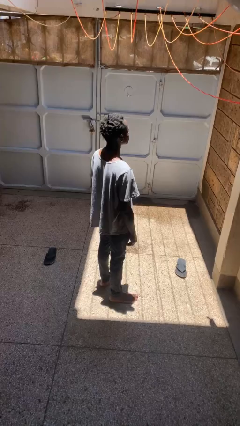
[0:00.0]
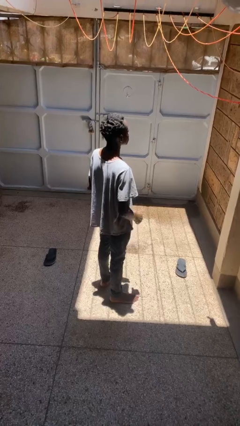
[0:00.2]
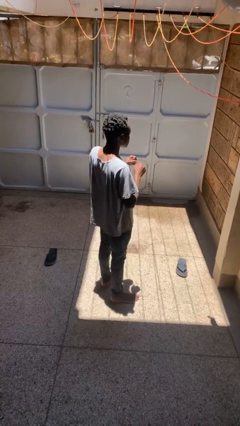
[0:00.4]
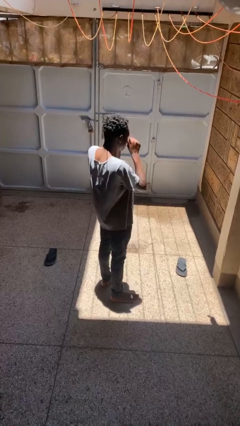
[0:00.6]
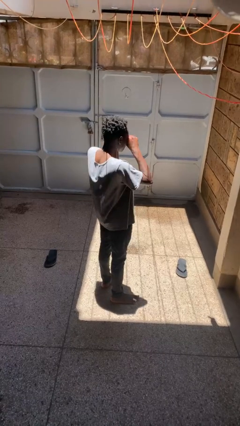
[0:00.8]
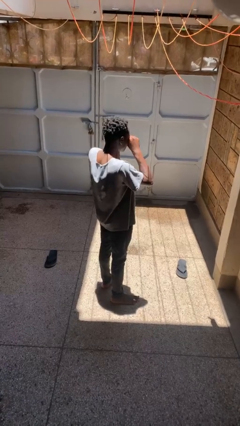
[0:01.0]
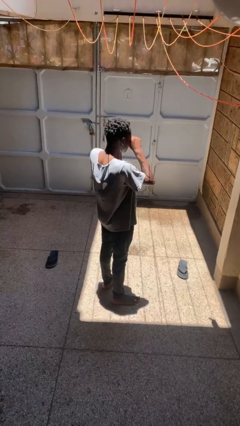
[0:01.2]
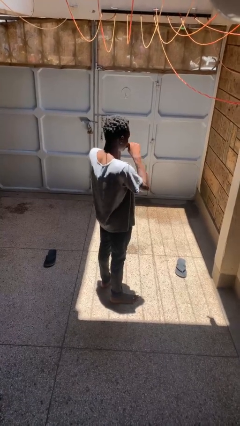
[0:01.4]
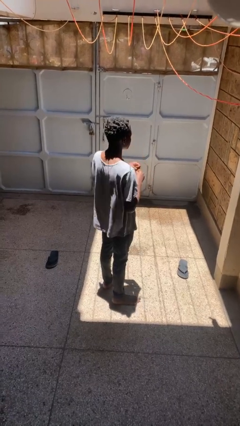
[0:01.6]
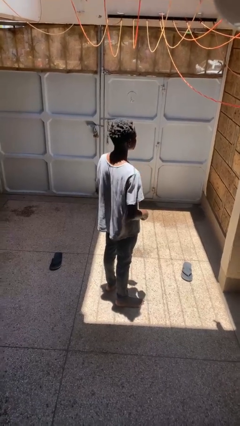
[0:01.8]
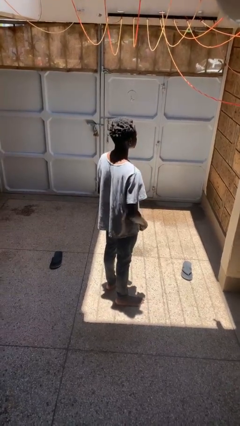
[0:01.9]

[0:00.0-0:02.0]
person rubs eyes

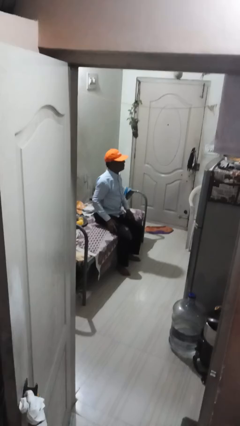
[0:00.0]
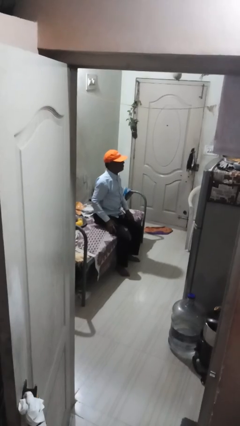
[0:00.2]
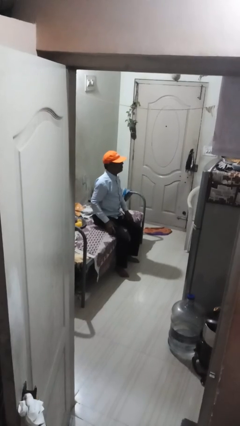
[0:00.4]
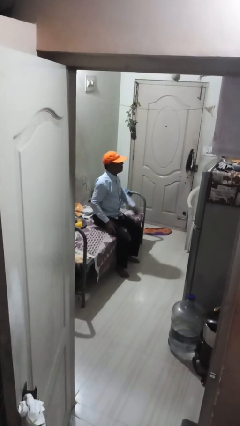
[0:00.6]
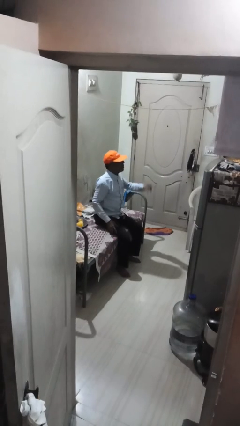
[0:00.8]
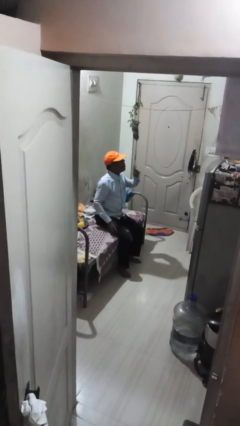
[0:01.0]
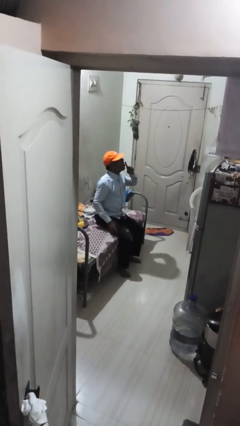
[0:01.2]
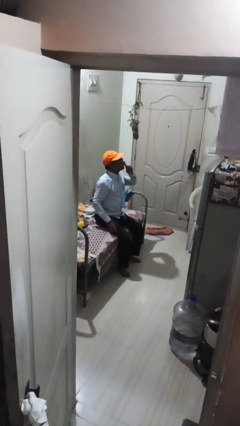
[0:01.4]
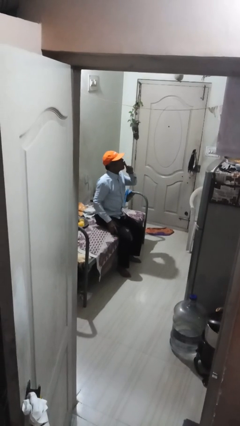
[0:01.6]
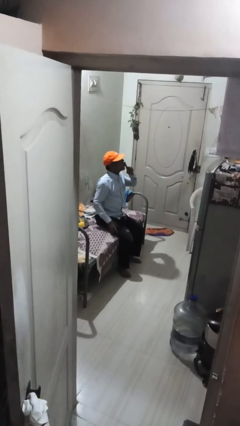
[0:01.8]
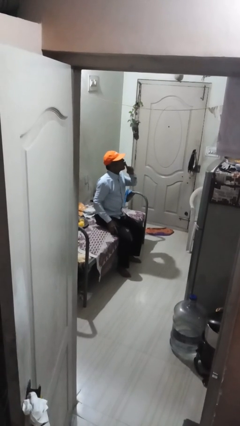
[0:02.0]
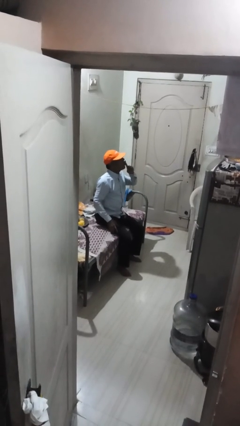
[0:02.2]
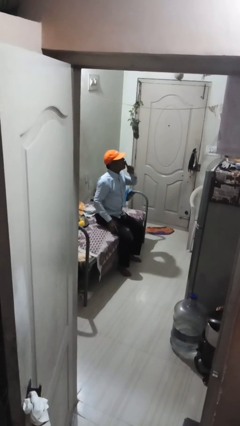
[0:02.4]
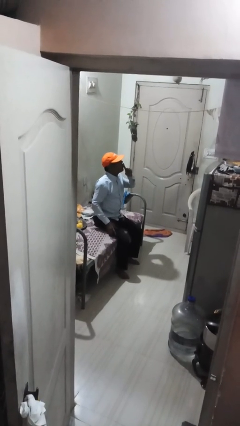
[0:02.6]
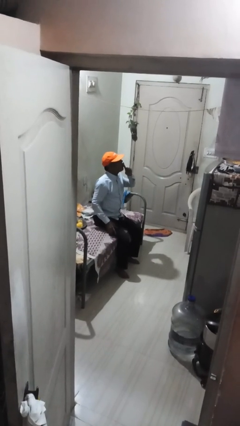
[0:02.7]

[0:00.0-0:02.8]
person gestures be quiet

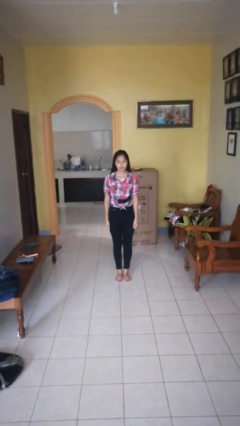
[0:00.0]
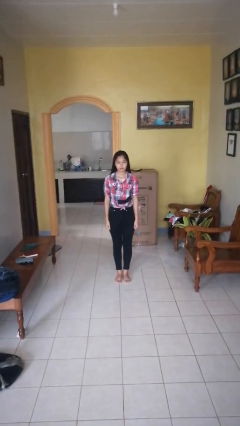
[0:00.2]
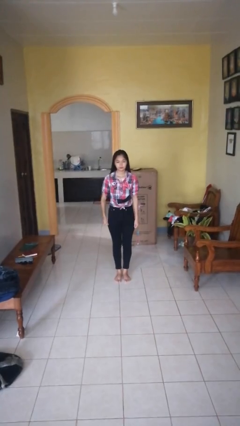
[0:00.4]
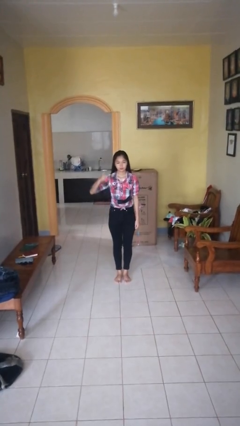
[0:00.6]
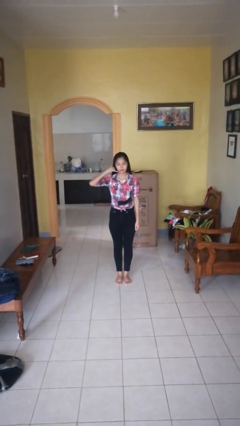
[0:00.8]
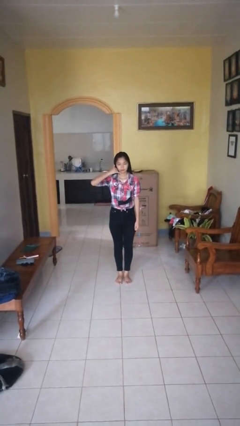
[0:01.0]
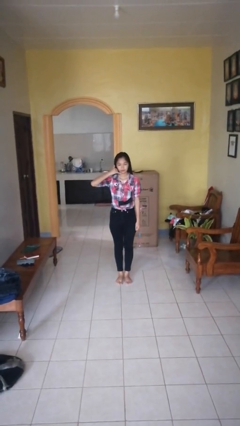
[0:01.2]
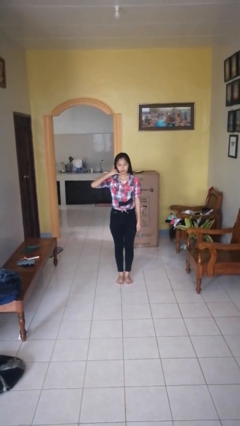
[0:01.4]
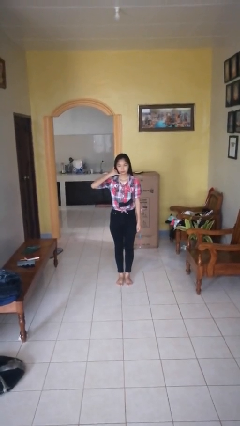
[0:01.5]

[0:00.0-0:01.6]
person gestures call me

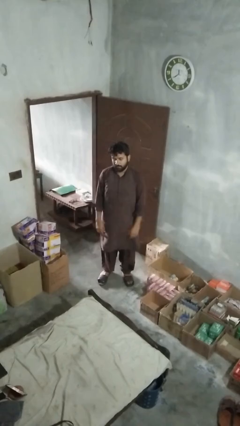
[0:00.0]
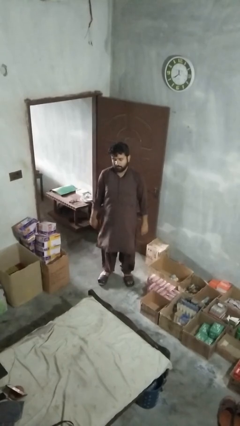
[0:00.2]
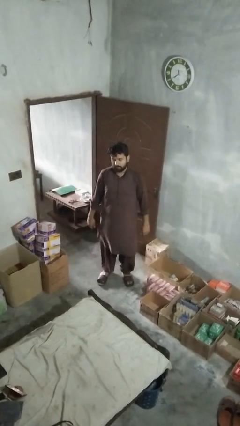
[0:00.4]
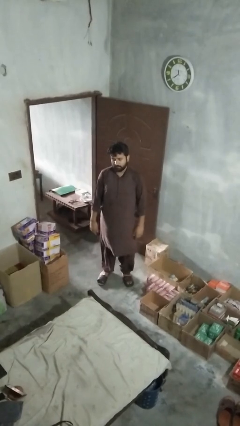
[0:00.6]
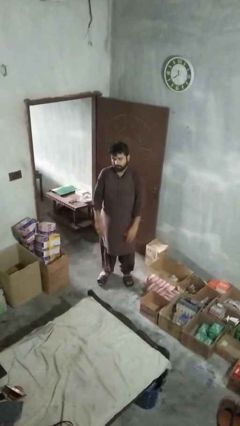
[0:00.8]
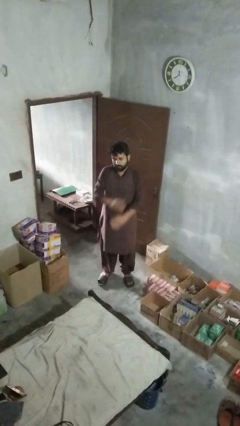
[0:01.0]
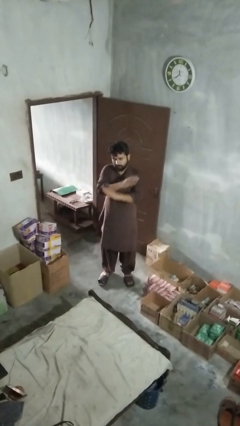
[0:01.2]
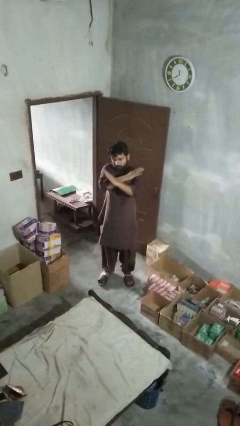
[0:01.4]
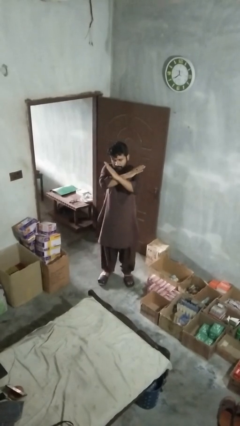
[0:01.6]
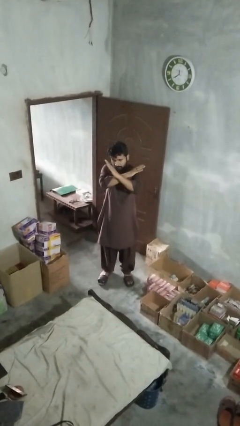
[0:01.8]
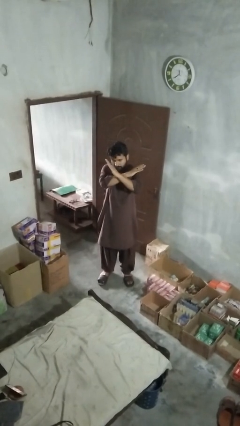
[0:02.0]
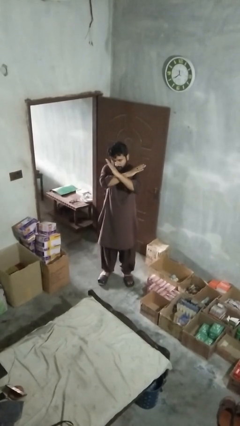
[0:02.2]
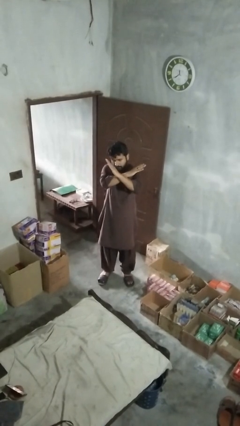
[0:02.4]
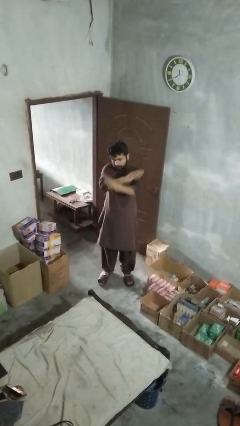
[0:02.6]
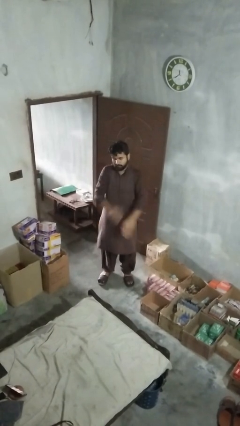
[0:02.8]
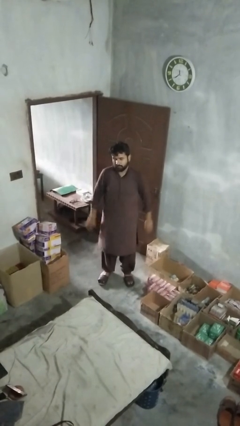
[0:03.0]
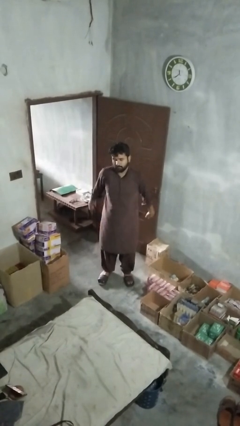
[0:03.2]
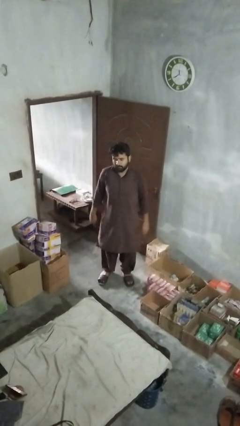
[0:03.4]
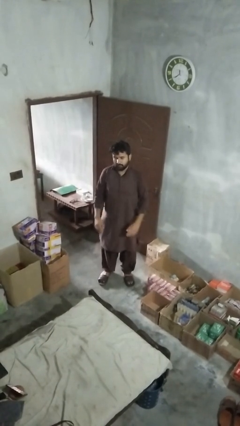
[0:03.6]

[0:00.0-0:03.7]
person gestures arms x

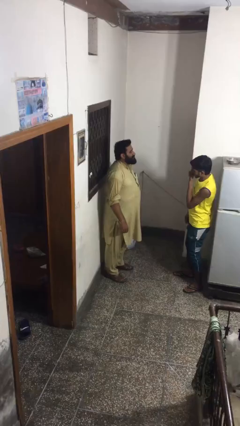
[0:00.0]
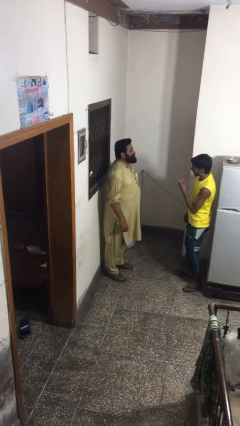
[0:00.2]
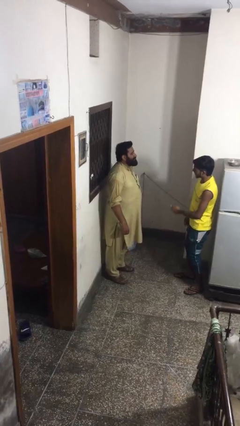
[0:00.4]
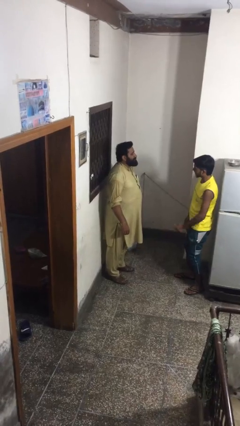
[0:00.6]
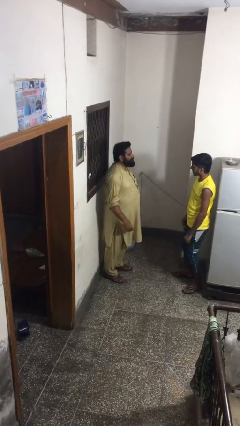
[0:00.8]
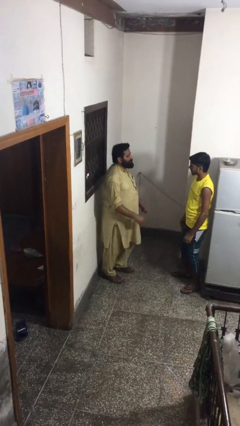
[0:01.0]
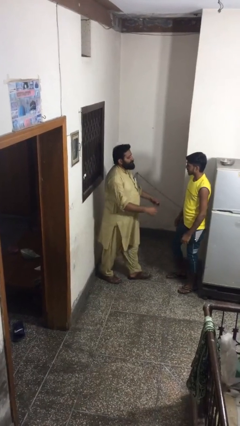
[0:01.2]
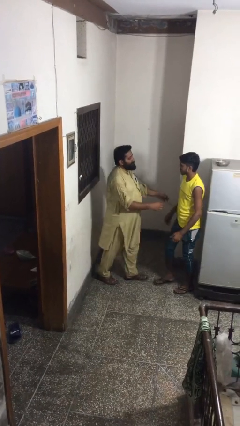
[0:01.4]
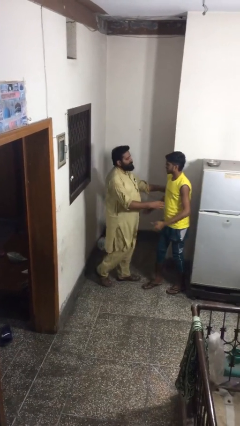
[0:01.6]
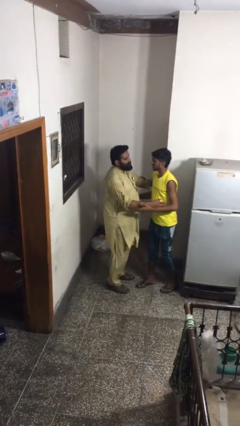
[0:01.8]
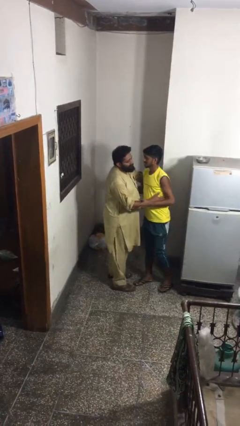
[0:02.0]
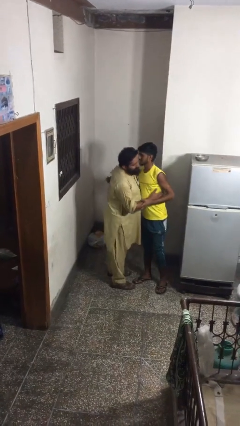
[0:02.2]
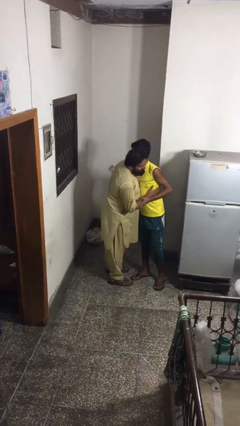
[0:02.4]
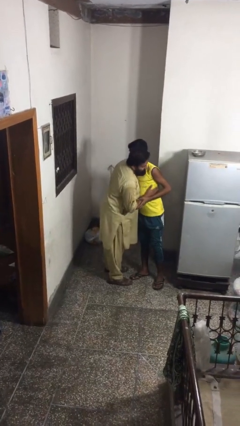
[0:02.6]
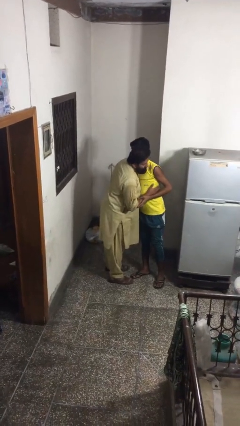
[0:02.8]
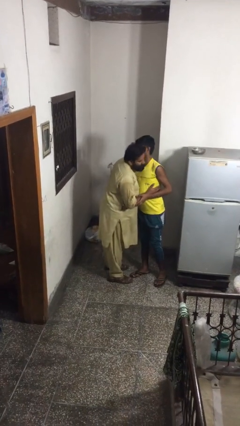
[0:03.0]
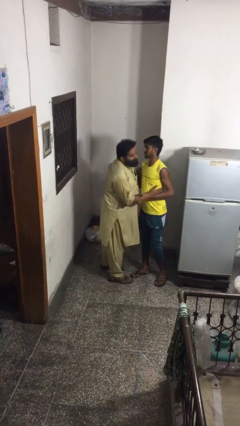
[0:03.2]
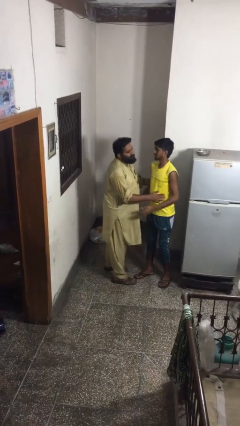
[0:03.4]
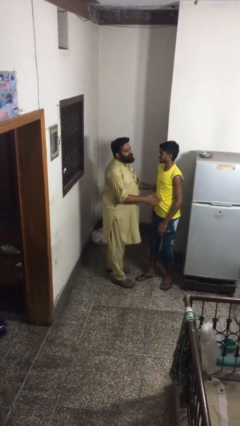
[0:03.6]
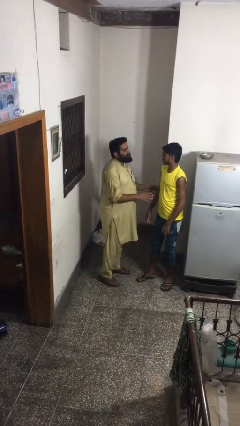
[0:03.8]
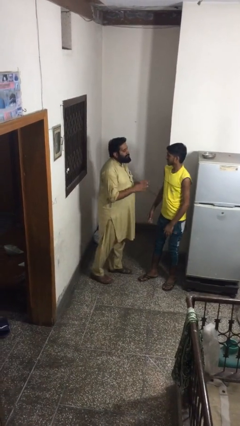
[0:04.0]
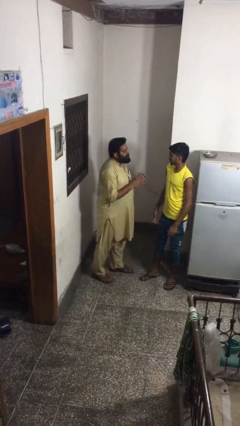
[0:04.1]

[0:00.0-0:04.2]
person embraces person

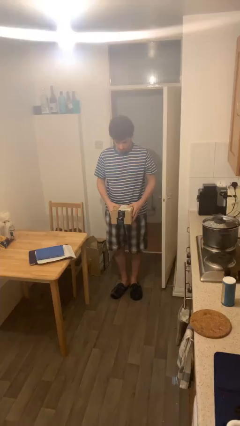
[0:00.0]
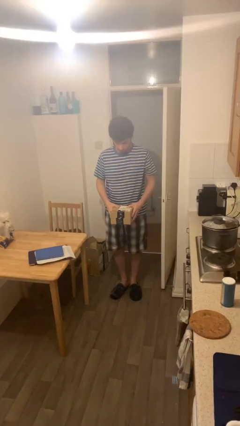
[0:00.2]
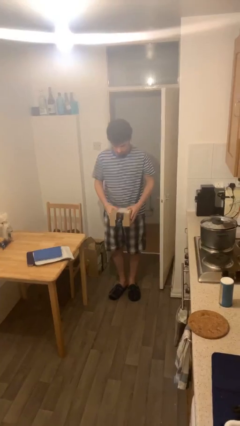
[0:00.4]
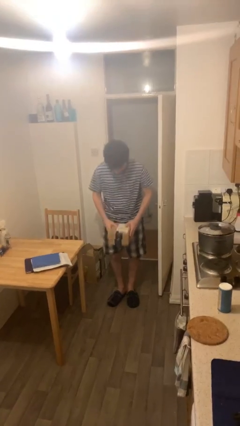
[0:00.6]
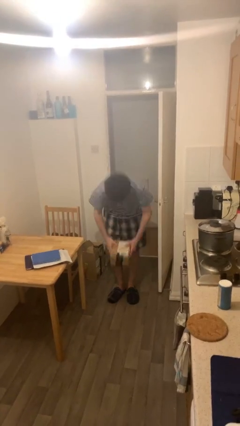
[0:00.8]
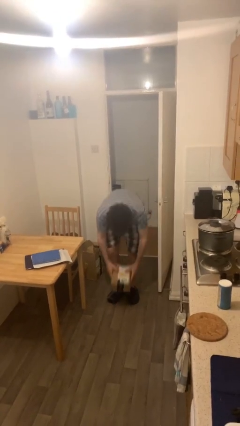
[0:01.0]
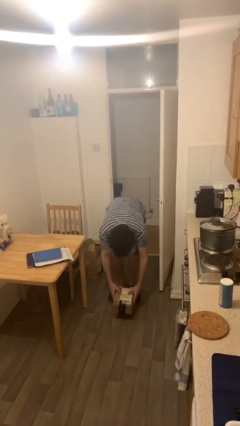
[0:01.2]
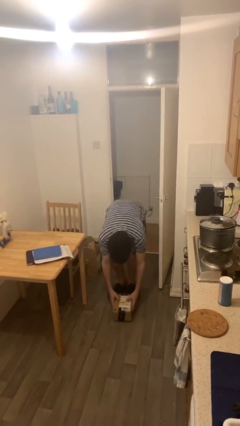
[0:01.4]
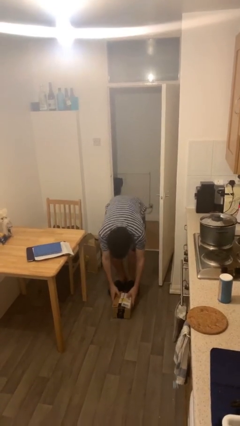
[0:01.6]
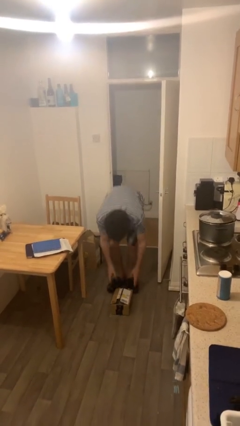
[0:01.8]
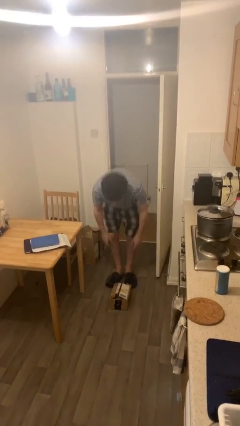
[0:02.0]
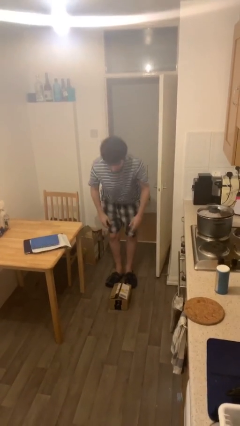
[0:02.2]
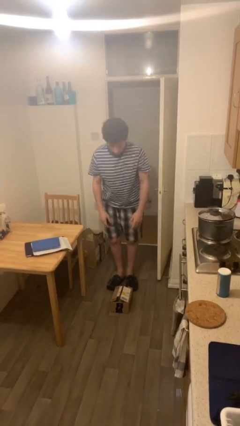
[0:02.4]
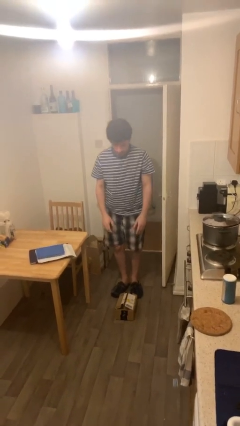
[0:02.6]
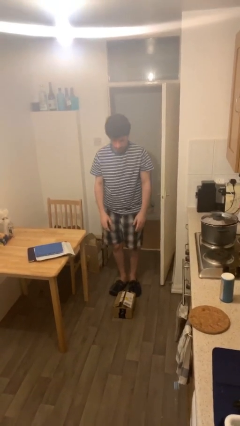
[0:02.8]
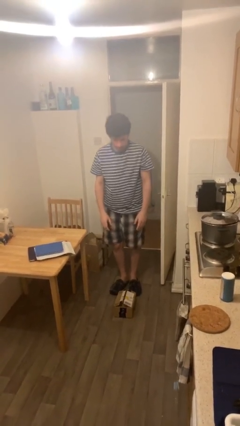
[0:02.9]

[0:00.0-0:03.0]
person puts down object on floor

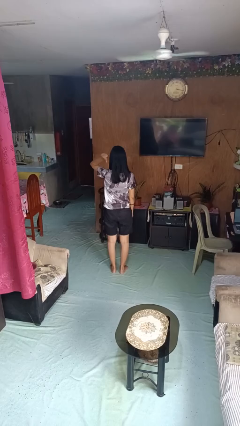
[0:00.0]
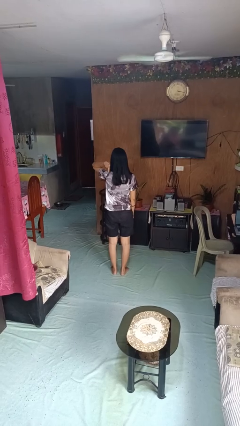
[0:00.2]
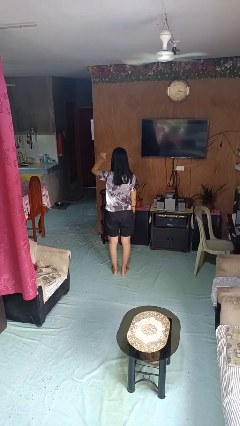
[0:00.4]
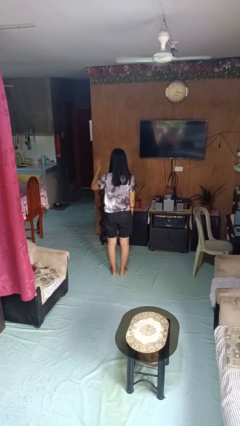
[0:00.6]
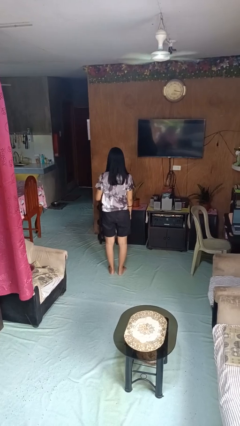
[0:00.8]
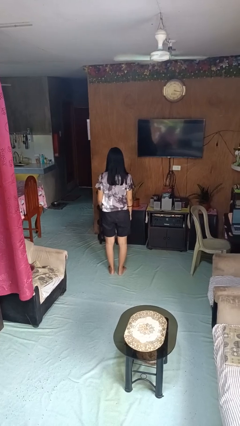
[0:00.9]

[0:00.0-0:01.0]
person gestures behind me
